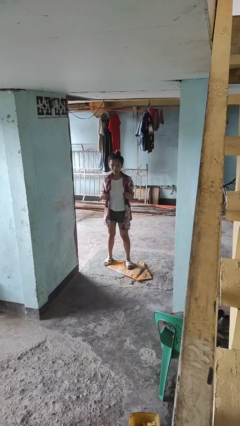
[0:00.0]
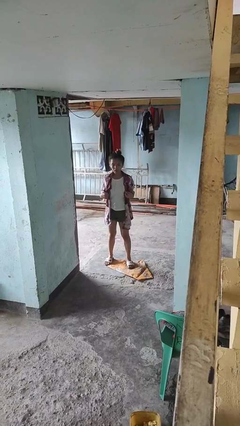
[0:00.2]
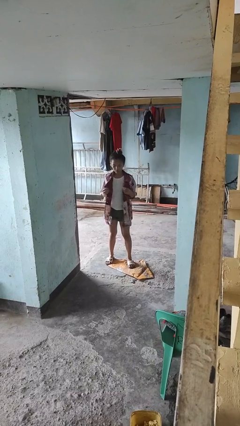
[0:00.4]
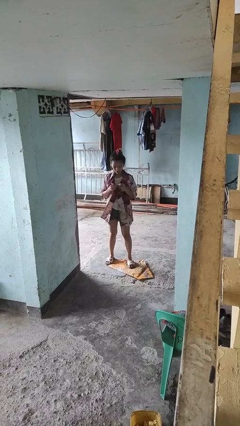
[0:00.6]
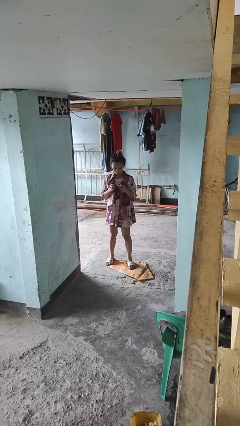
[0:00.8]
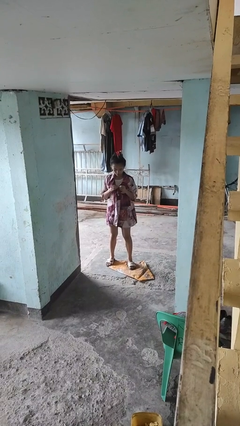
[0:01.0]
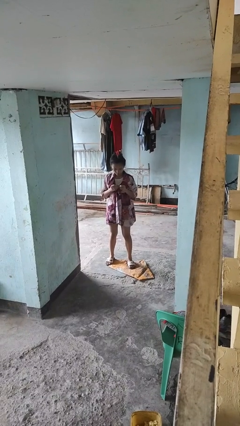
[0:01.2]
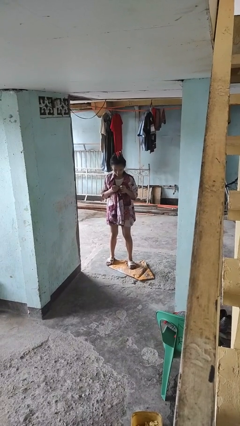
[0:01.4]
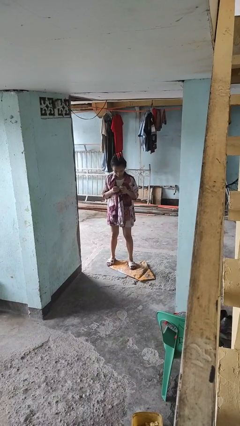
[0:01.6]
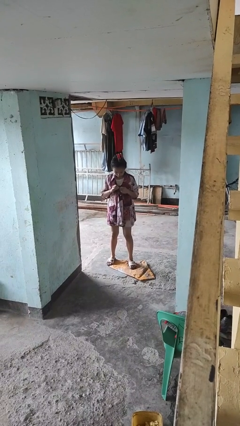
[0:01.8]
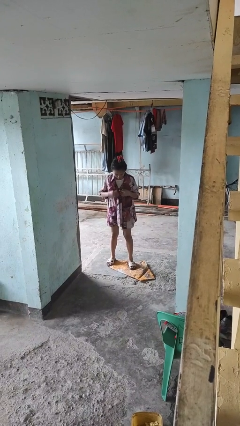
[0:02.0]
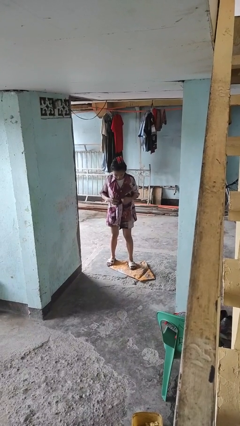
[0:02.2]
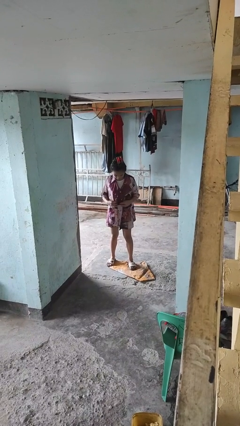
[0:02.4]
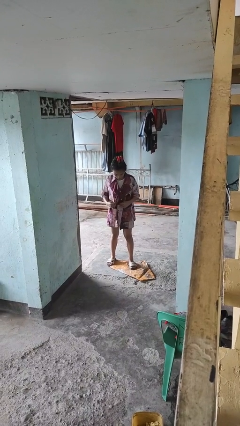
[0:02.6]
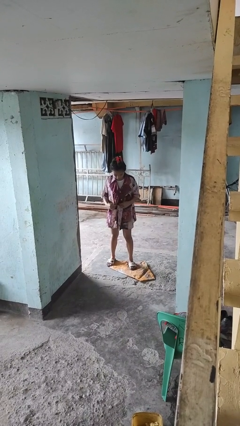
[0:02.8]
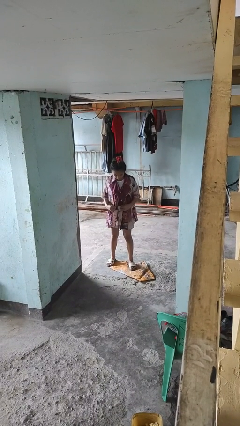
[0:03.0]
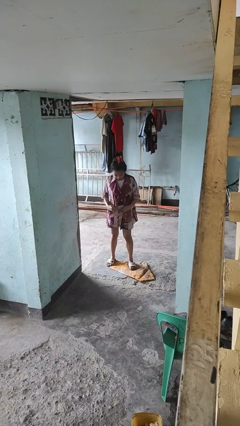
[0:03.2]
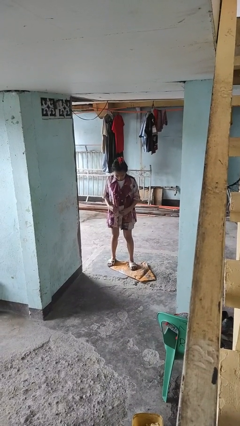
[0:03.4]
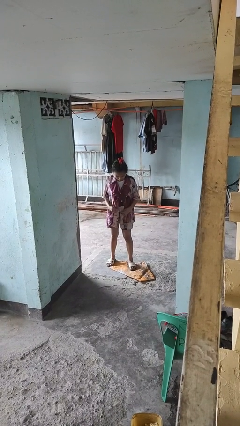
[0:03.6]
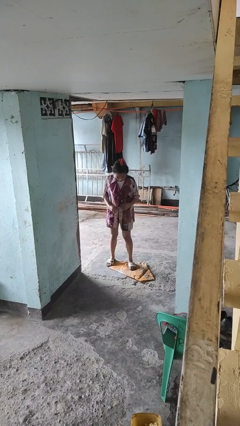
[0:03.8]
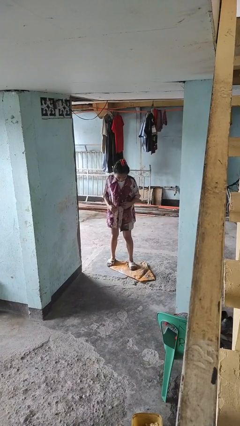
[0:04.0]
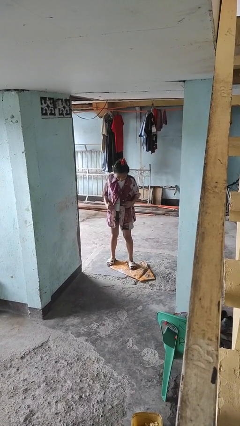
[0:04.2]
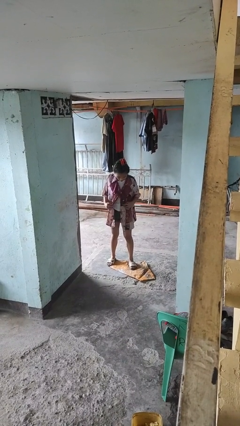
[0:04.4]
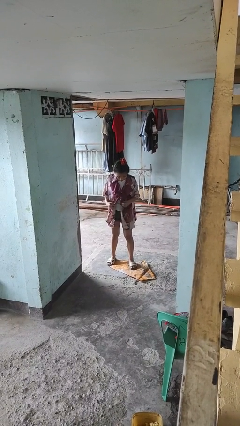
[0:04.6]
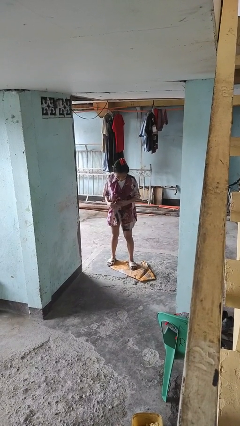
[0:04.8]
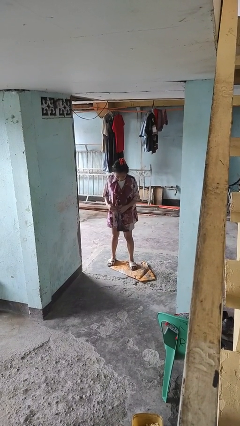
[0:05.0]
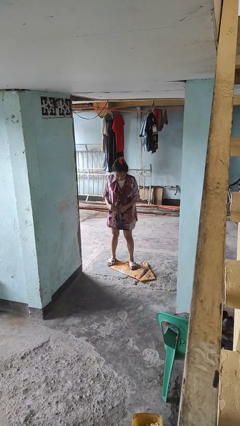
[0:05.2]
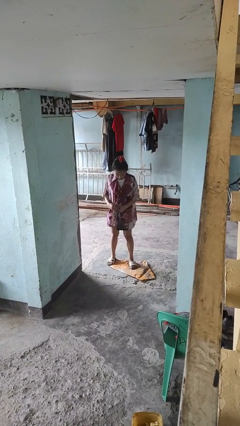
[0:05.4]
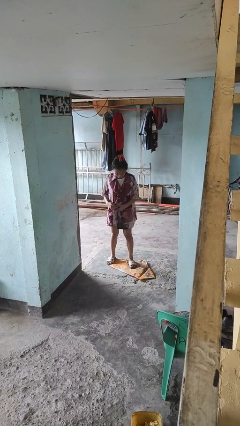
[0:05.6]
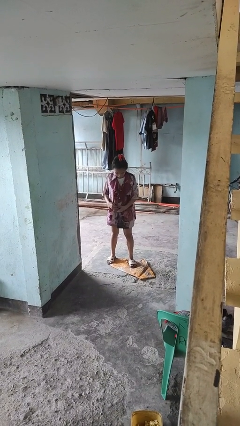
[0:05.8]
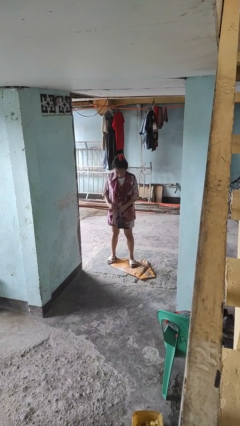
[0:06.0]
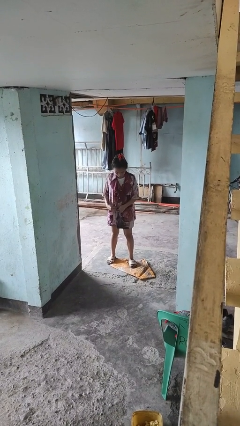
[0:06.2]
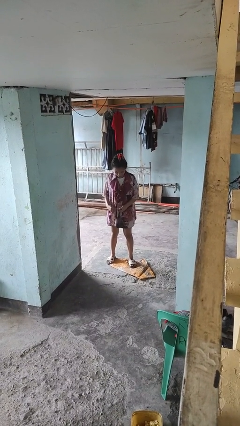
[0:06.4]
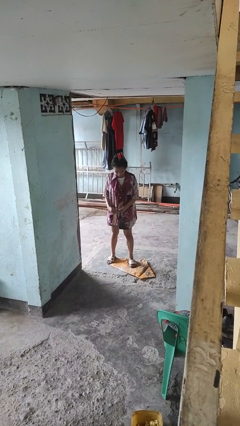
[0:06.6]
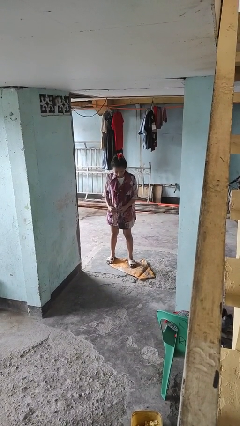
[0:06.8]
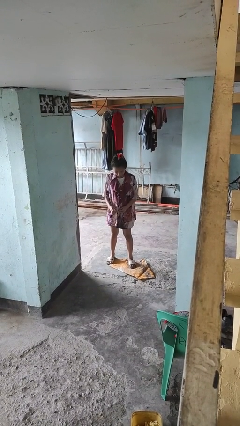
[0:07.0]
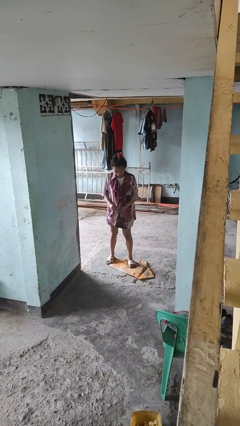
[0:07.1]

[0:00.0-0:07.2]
person buttons shirt

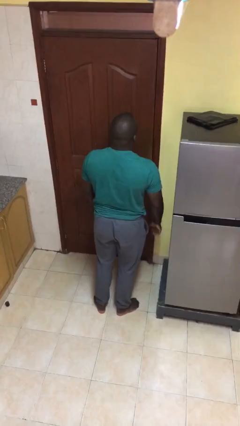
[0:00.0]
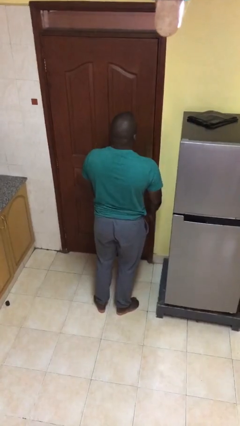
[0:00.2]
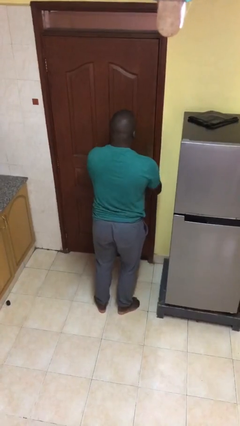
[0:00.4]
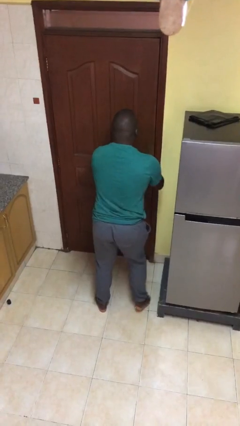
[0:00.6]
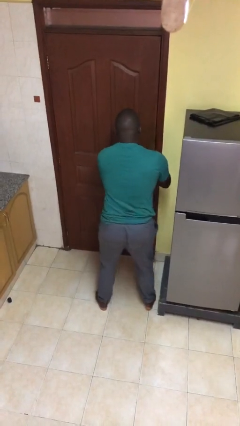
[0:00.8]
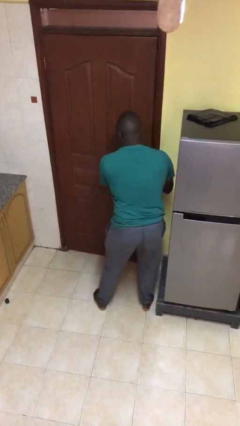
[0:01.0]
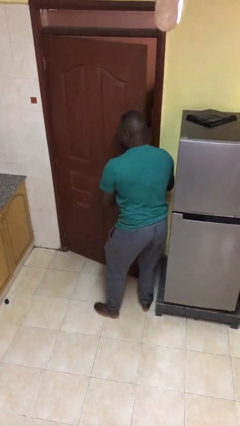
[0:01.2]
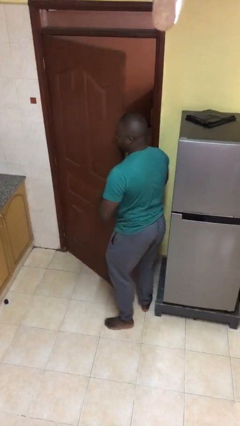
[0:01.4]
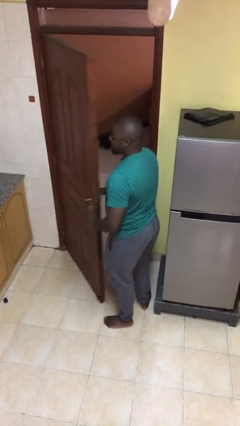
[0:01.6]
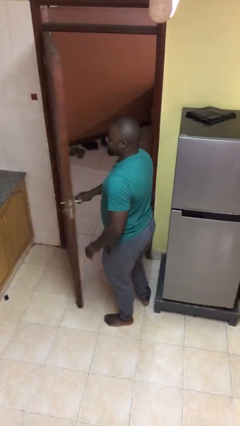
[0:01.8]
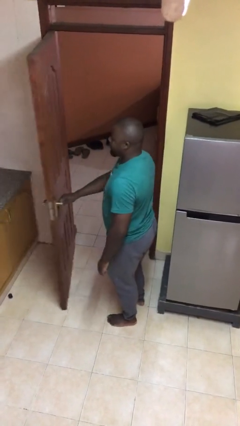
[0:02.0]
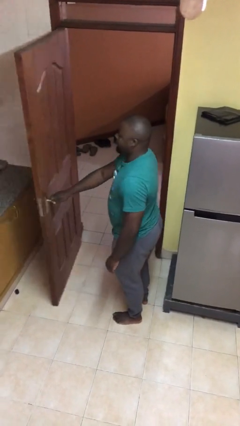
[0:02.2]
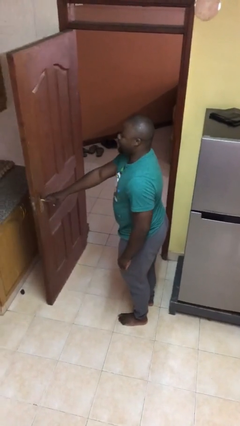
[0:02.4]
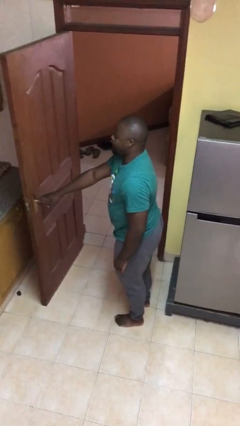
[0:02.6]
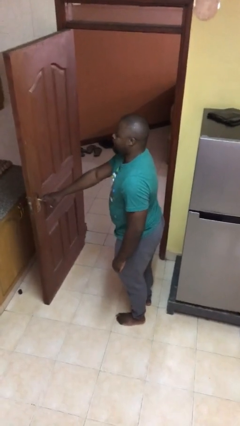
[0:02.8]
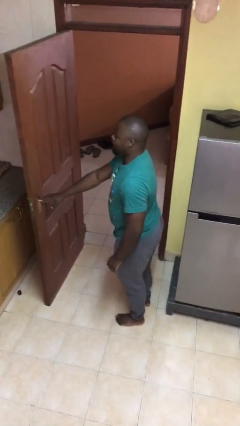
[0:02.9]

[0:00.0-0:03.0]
person opens facility door

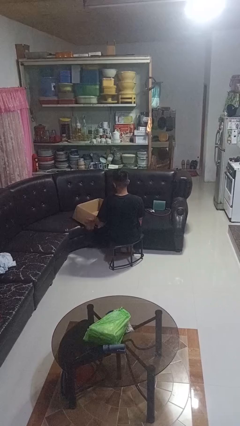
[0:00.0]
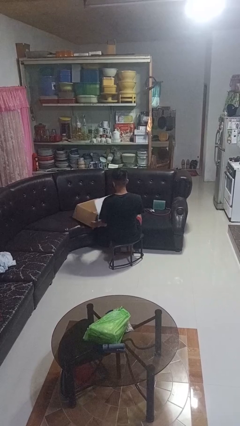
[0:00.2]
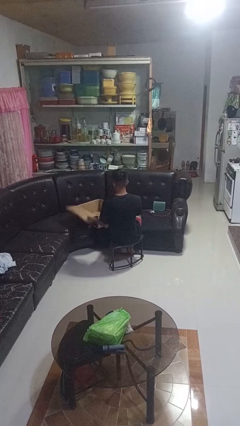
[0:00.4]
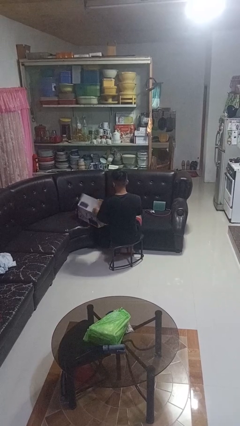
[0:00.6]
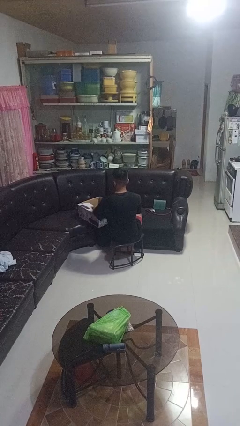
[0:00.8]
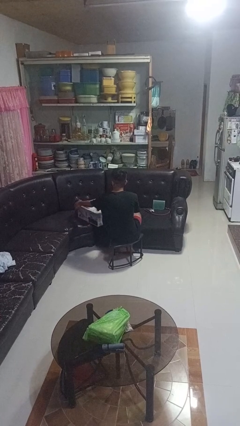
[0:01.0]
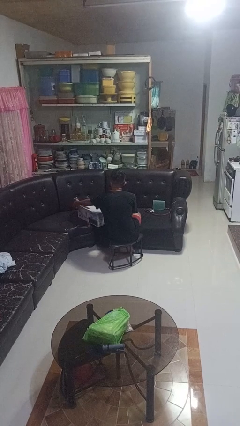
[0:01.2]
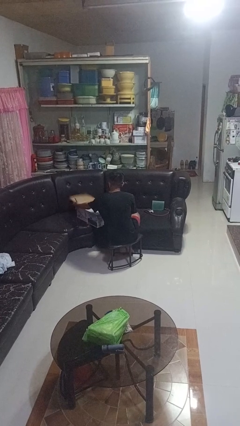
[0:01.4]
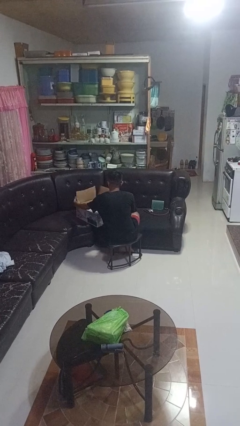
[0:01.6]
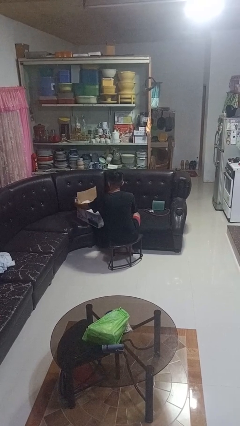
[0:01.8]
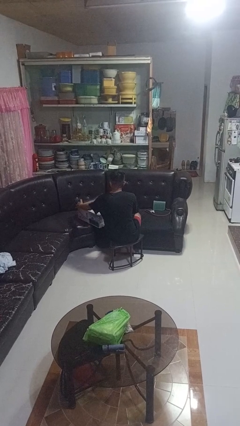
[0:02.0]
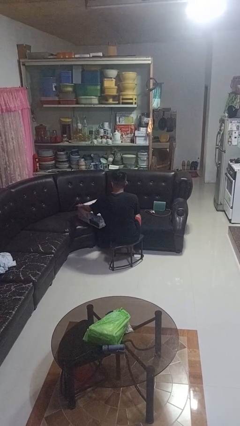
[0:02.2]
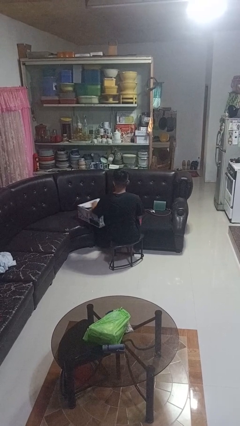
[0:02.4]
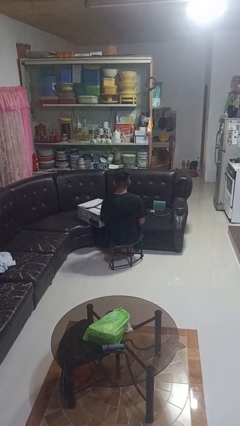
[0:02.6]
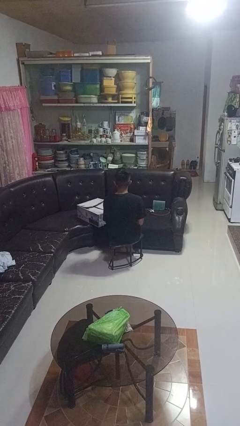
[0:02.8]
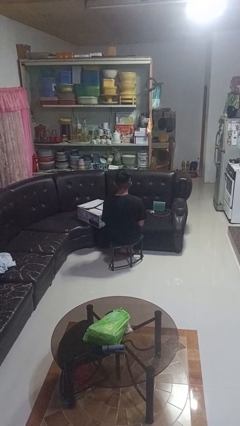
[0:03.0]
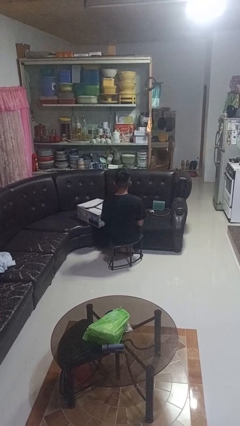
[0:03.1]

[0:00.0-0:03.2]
person closes box

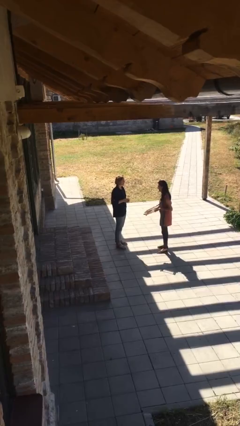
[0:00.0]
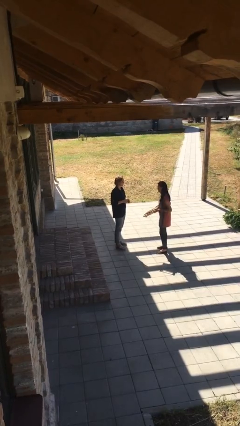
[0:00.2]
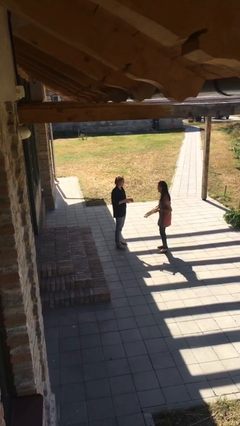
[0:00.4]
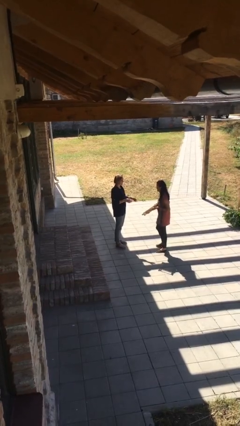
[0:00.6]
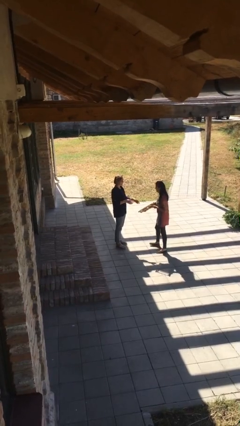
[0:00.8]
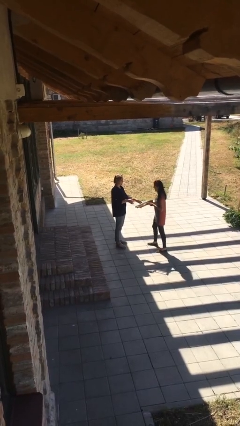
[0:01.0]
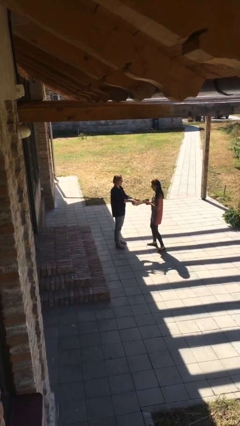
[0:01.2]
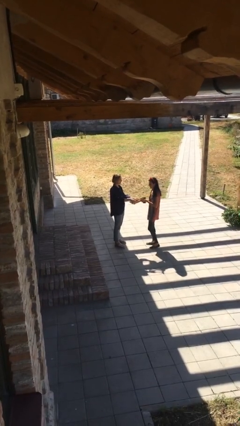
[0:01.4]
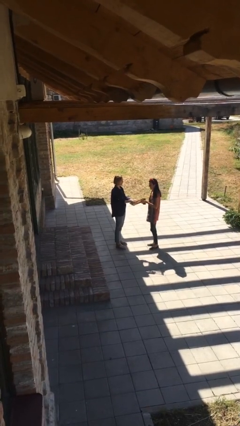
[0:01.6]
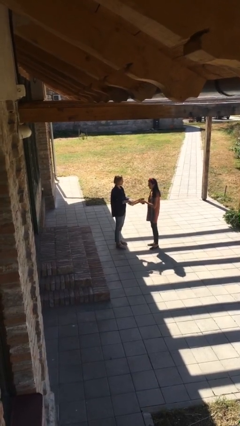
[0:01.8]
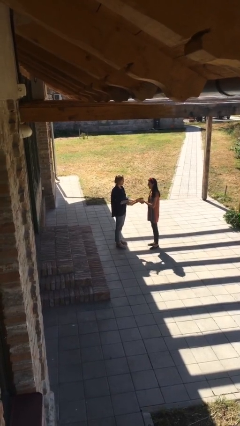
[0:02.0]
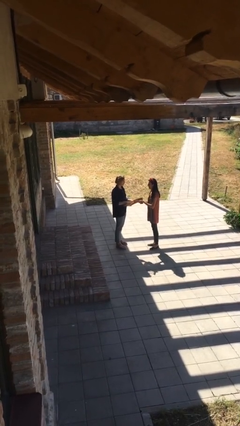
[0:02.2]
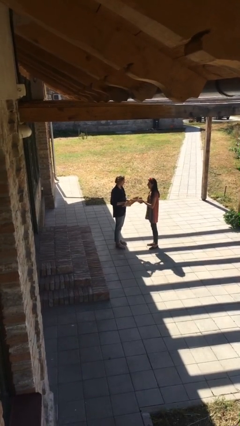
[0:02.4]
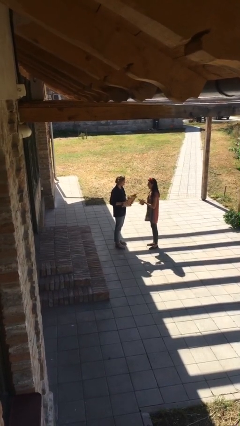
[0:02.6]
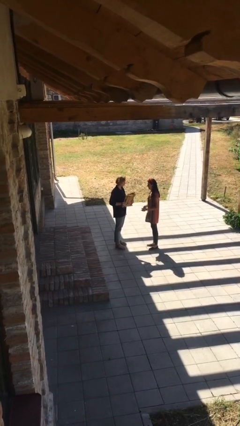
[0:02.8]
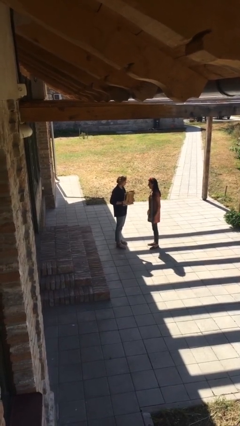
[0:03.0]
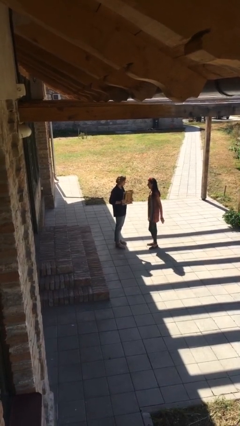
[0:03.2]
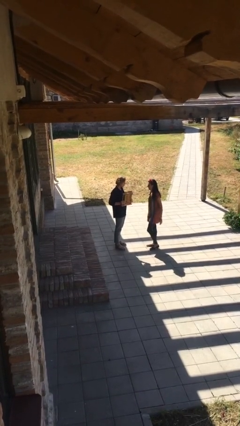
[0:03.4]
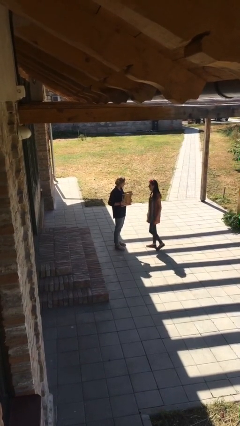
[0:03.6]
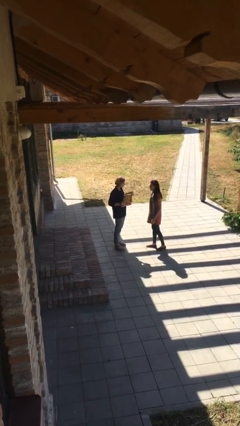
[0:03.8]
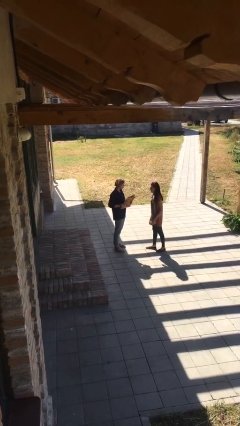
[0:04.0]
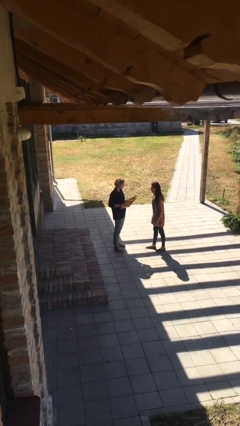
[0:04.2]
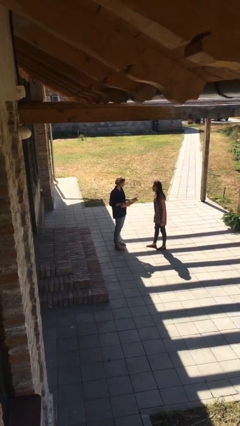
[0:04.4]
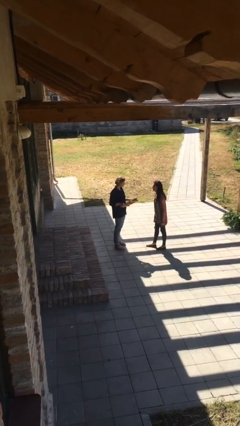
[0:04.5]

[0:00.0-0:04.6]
person transfers object to person
